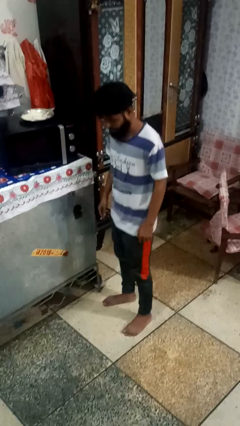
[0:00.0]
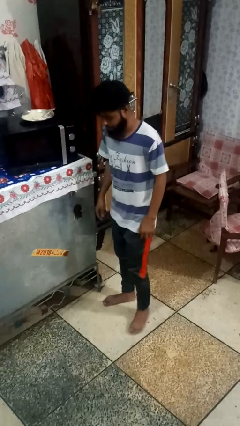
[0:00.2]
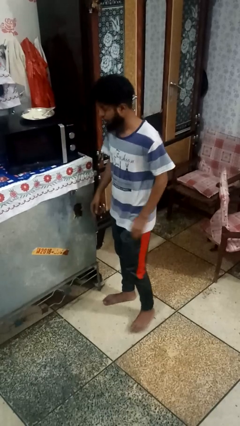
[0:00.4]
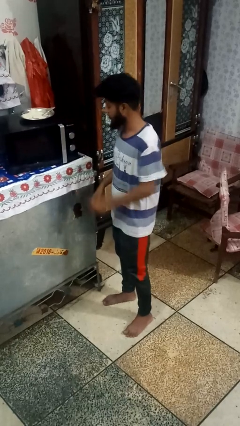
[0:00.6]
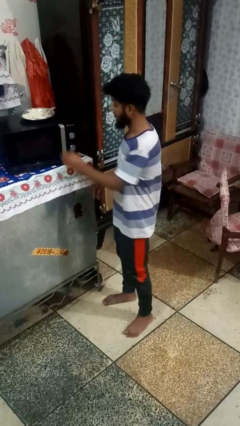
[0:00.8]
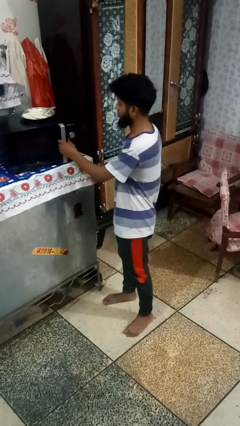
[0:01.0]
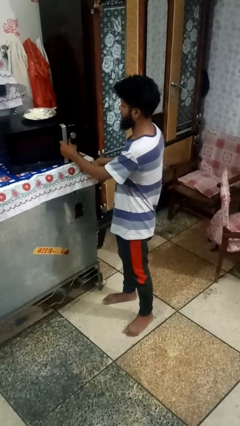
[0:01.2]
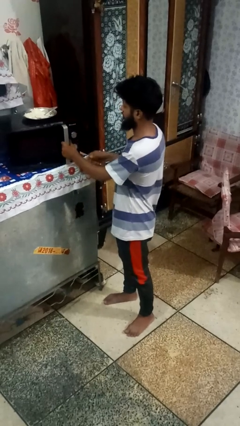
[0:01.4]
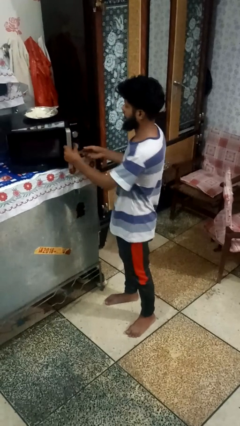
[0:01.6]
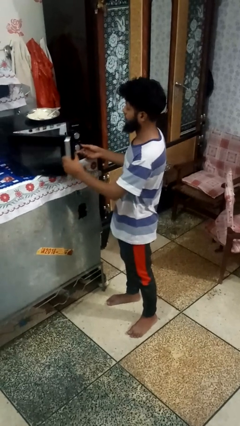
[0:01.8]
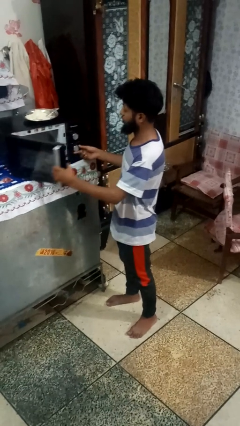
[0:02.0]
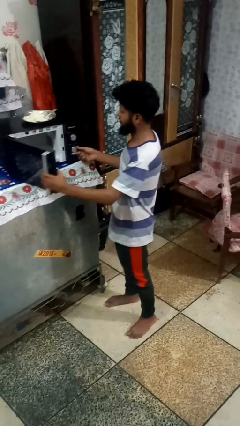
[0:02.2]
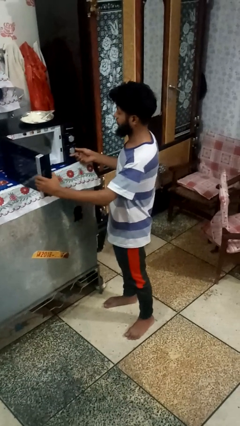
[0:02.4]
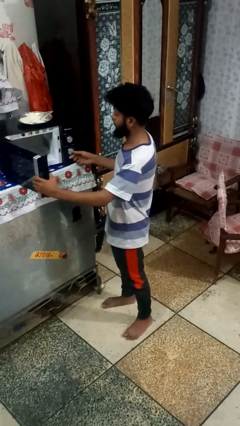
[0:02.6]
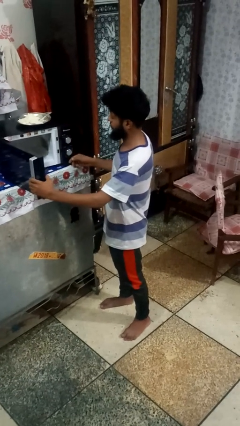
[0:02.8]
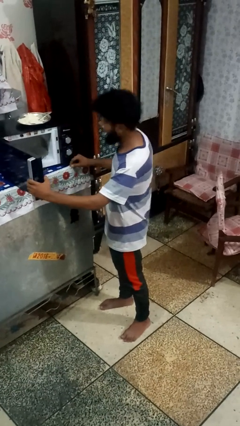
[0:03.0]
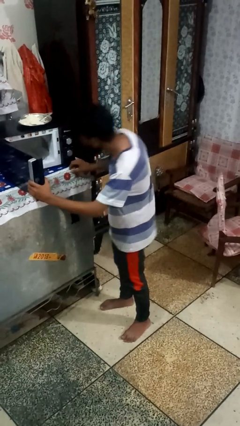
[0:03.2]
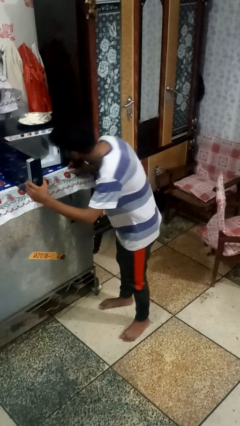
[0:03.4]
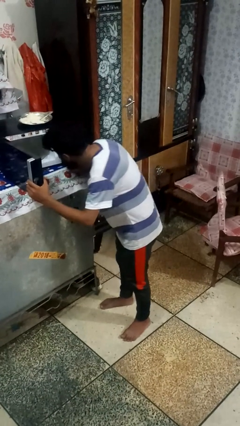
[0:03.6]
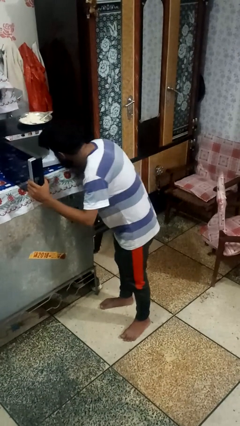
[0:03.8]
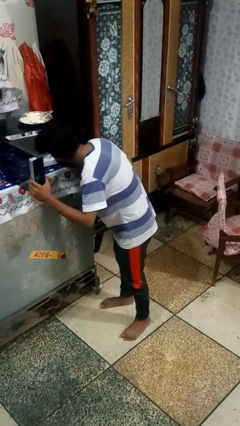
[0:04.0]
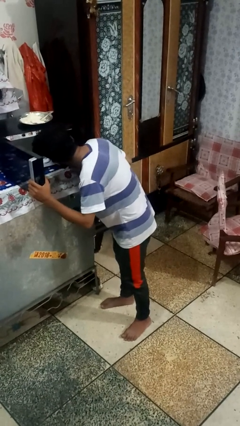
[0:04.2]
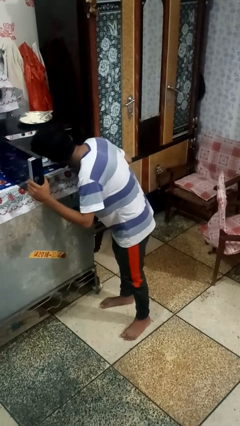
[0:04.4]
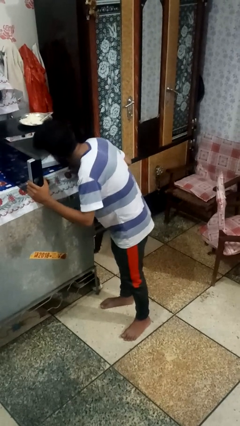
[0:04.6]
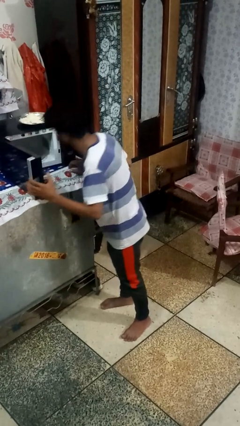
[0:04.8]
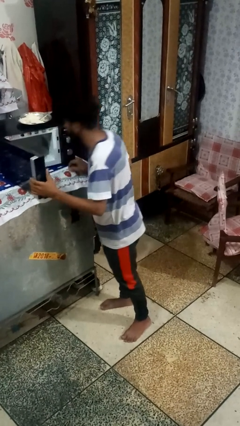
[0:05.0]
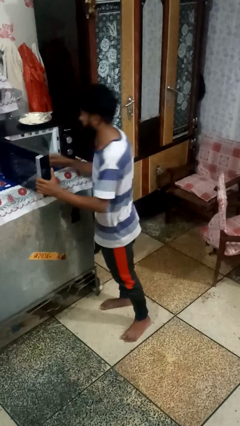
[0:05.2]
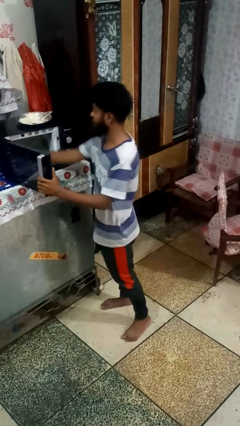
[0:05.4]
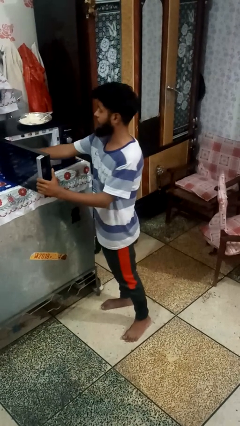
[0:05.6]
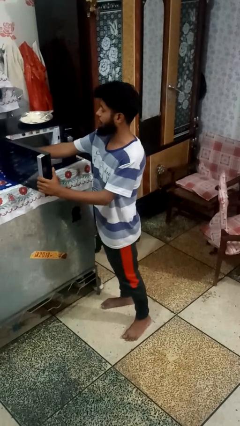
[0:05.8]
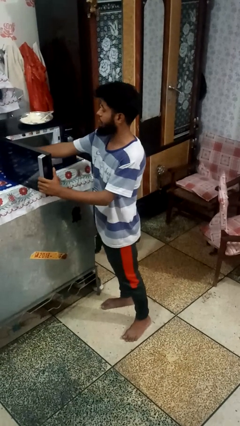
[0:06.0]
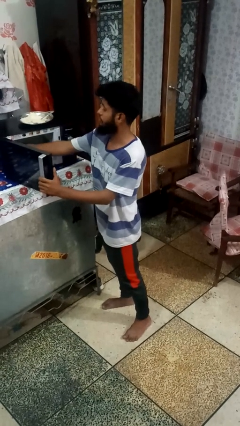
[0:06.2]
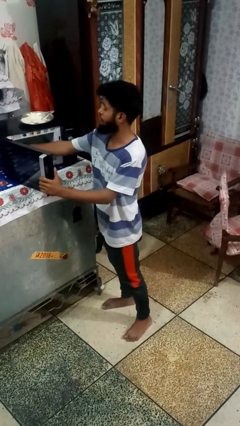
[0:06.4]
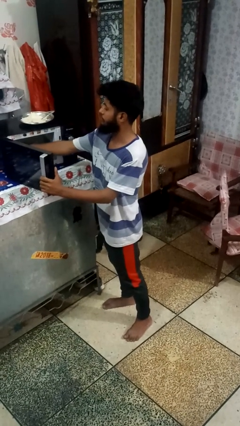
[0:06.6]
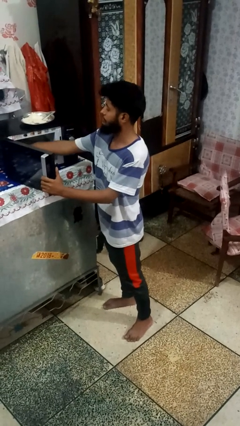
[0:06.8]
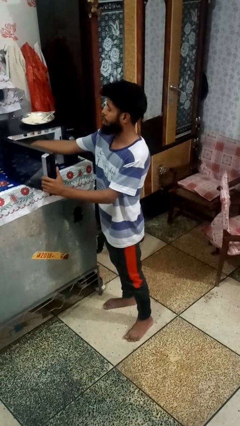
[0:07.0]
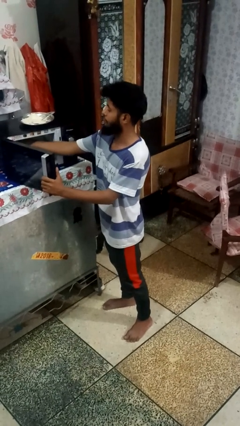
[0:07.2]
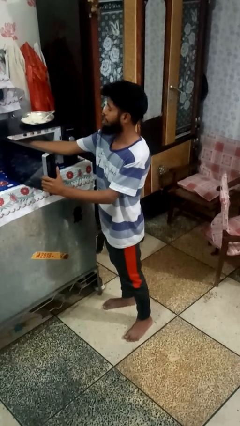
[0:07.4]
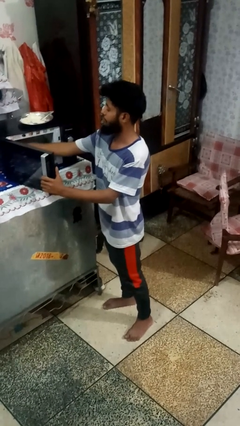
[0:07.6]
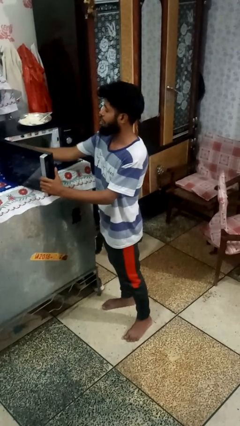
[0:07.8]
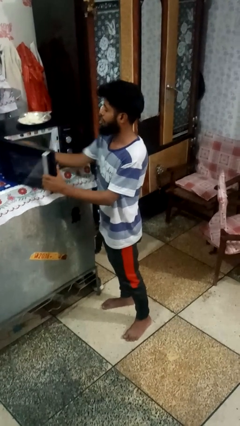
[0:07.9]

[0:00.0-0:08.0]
person opens oven door

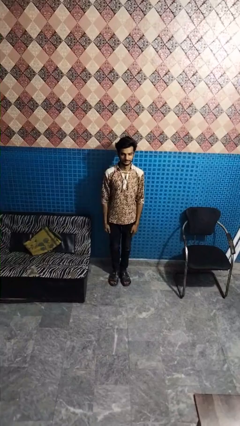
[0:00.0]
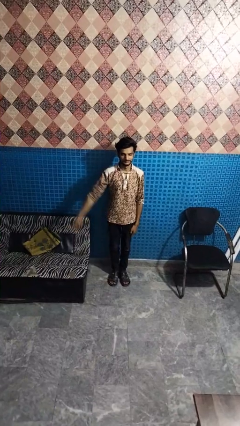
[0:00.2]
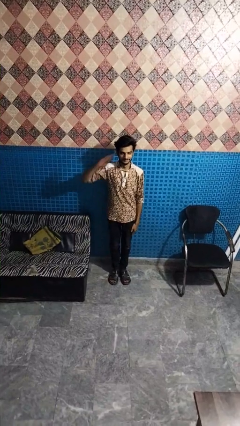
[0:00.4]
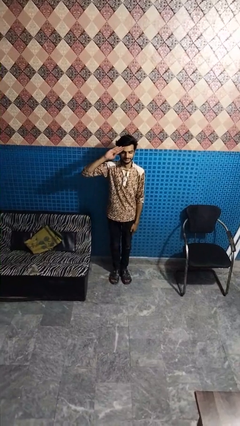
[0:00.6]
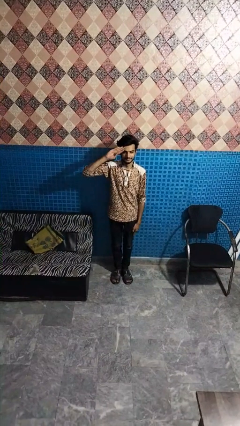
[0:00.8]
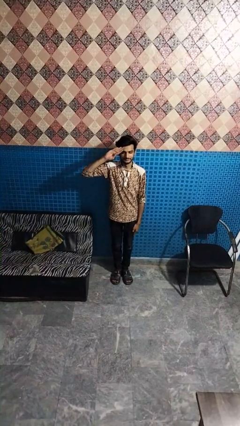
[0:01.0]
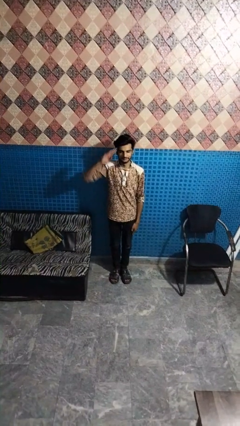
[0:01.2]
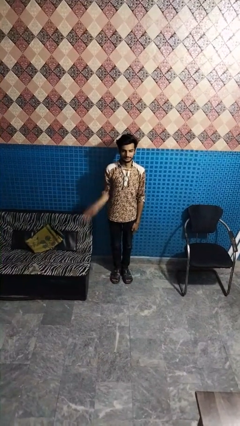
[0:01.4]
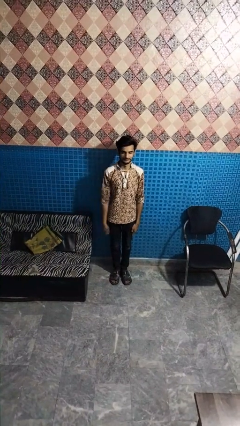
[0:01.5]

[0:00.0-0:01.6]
person salutes

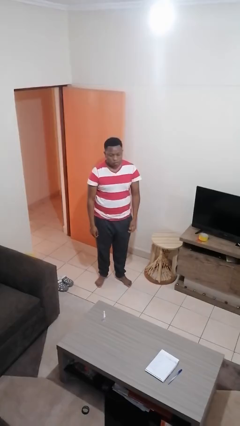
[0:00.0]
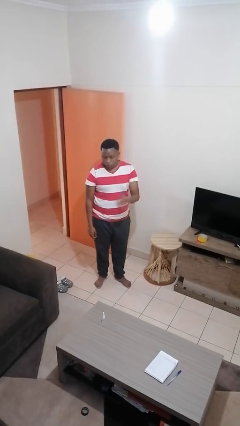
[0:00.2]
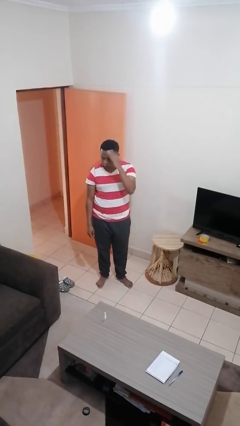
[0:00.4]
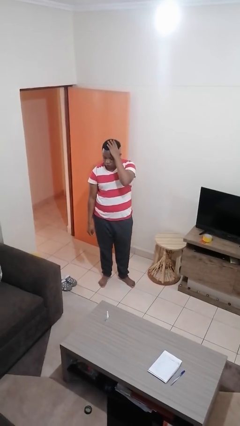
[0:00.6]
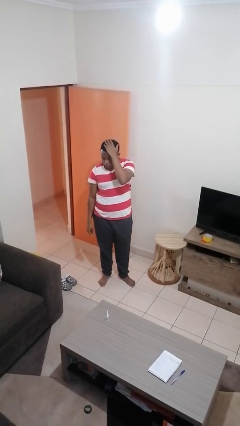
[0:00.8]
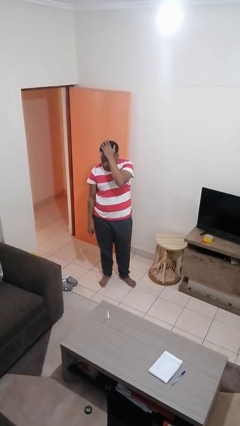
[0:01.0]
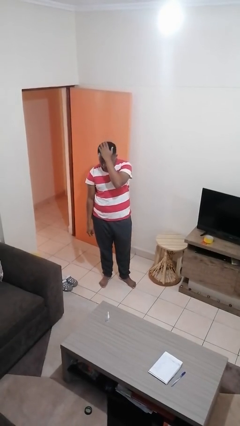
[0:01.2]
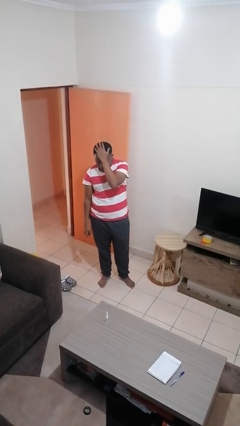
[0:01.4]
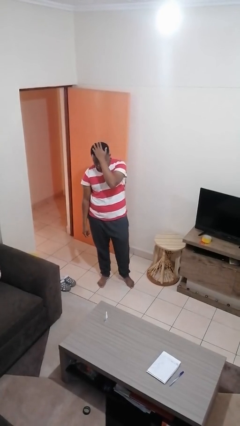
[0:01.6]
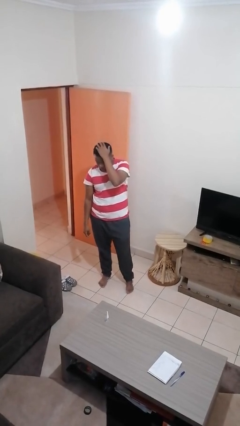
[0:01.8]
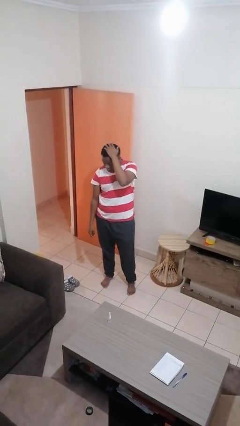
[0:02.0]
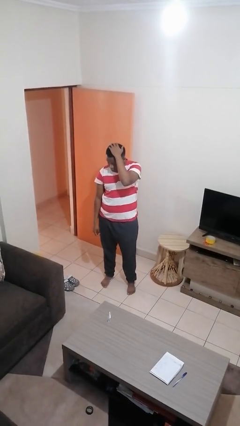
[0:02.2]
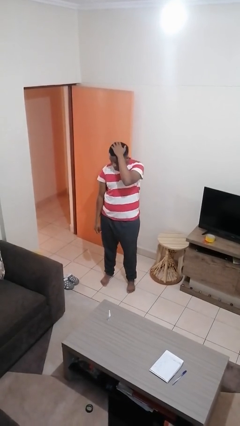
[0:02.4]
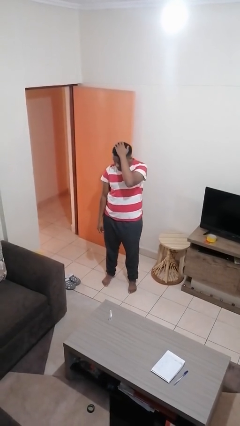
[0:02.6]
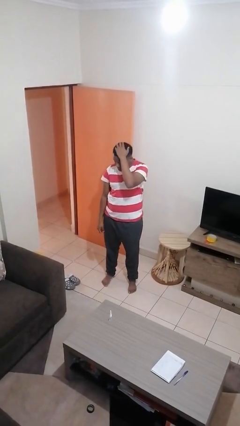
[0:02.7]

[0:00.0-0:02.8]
person pats head

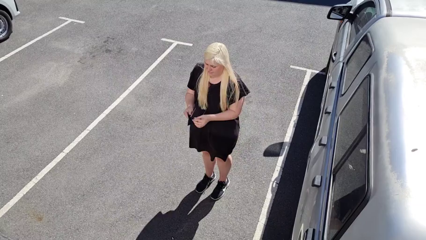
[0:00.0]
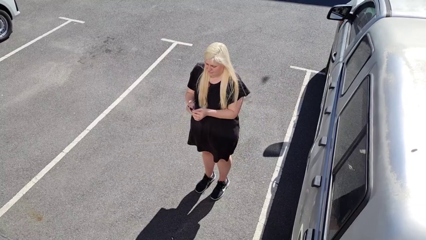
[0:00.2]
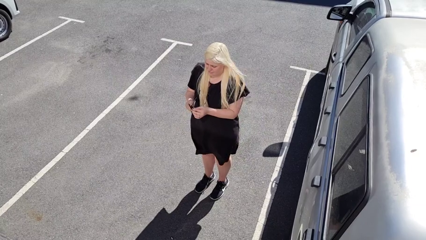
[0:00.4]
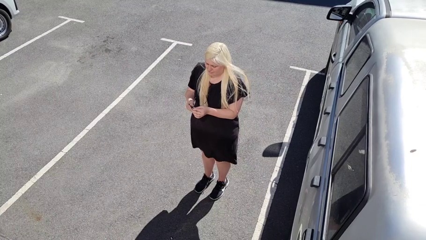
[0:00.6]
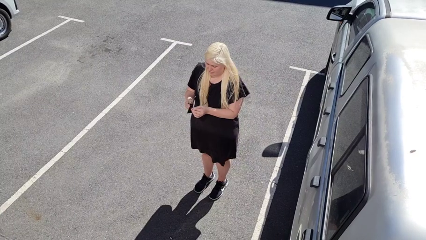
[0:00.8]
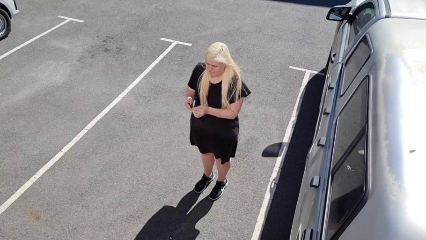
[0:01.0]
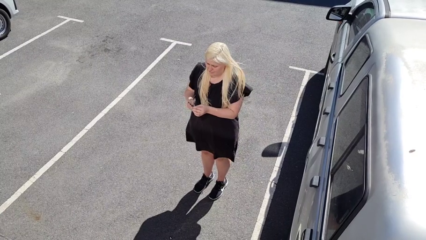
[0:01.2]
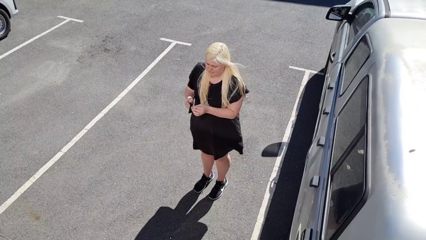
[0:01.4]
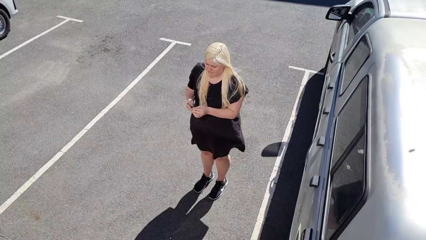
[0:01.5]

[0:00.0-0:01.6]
person cleans eyeglasses

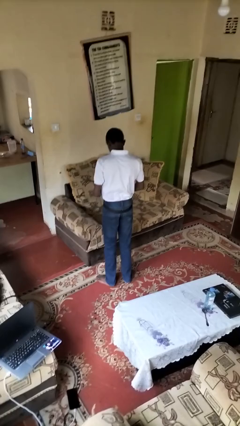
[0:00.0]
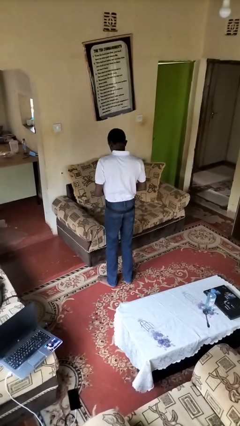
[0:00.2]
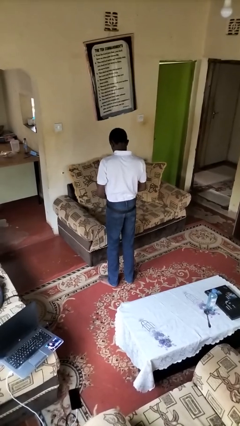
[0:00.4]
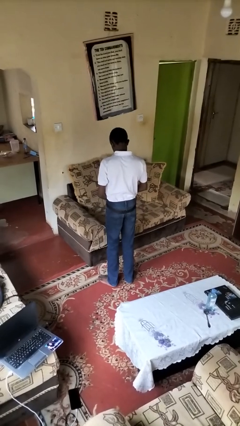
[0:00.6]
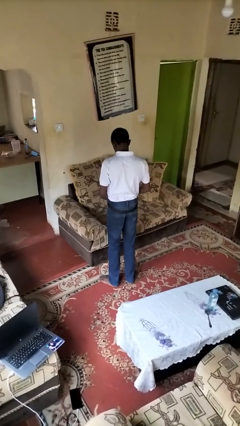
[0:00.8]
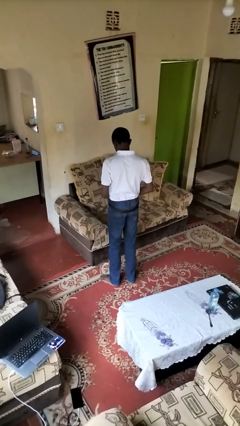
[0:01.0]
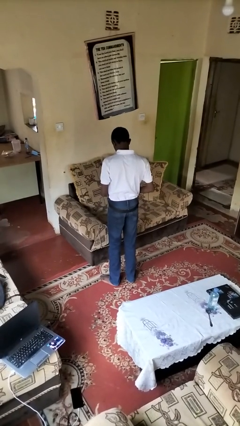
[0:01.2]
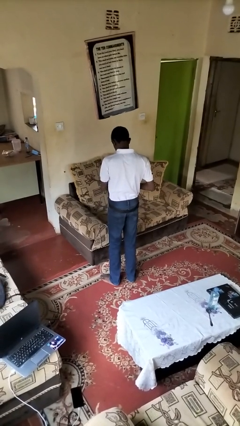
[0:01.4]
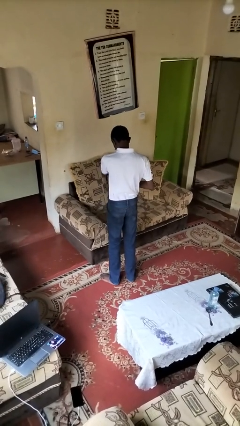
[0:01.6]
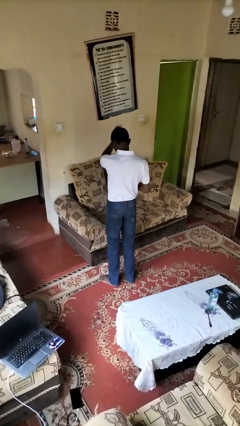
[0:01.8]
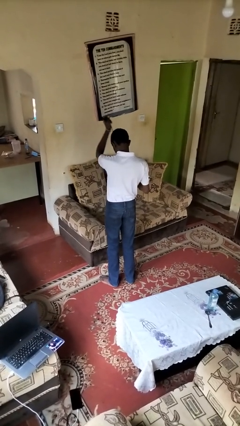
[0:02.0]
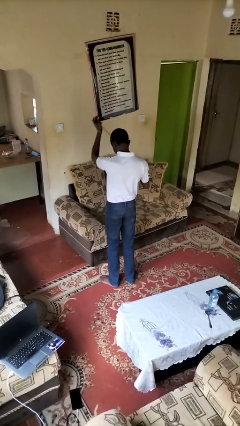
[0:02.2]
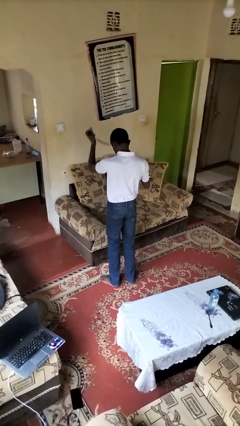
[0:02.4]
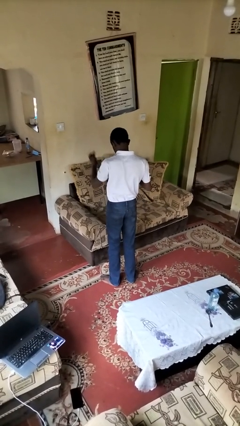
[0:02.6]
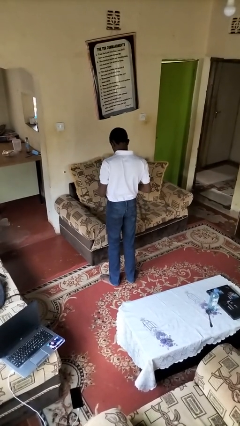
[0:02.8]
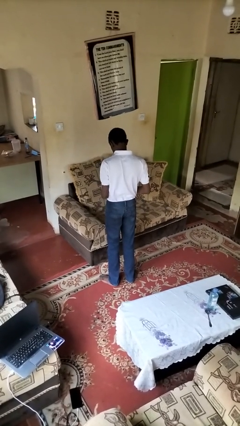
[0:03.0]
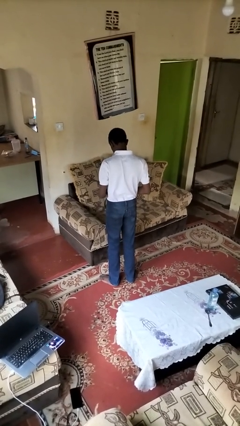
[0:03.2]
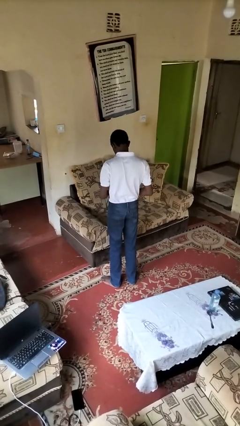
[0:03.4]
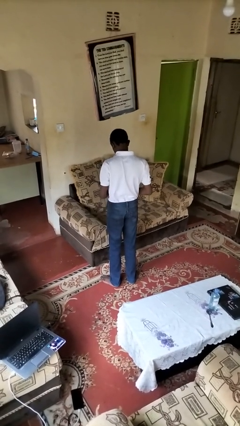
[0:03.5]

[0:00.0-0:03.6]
person takes off belt
